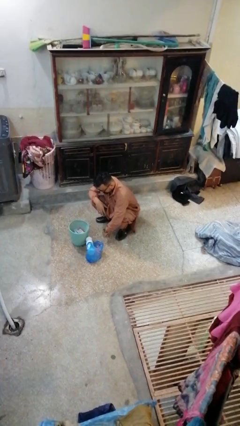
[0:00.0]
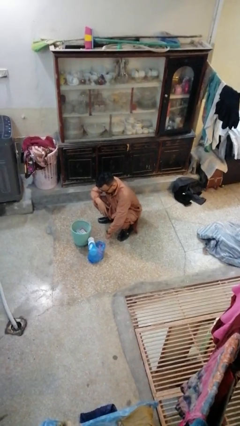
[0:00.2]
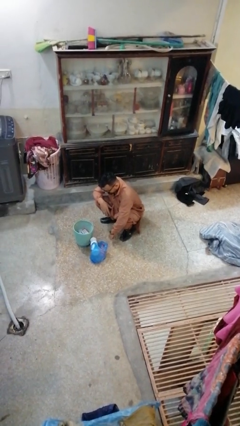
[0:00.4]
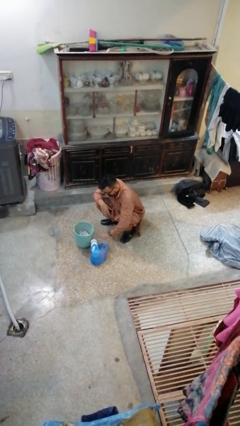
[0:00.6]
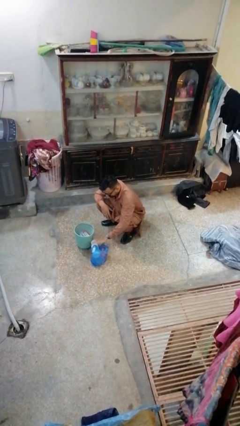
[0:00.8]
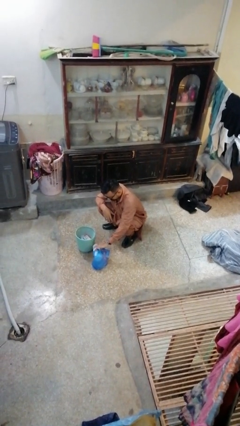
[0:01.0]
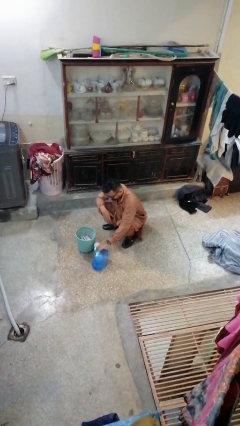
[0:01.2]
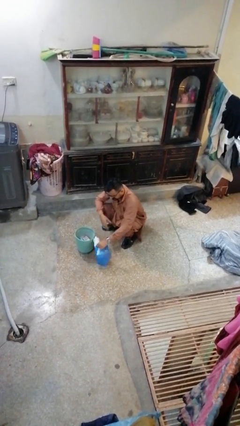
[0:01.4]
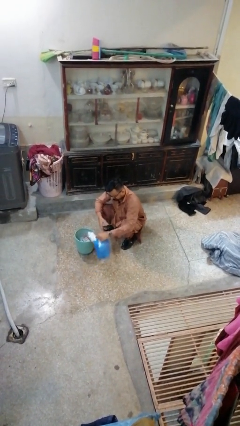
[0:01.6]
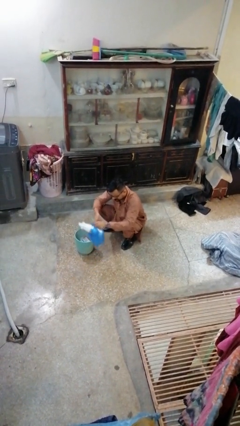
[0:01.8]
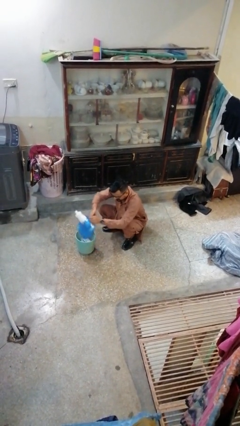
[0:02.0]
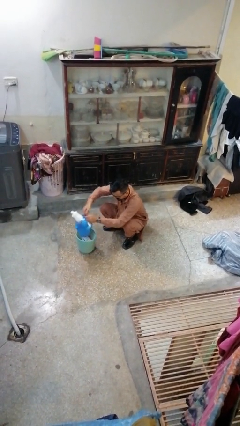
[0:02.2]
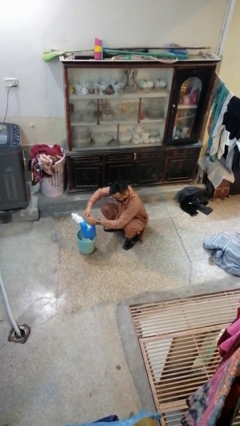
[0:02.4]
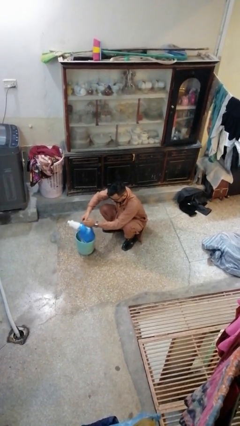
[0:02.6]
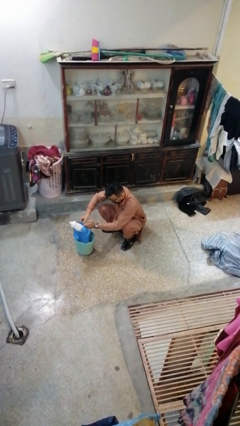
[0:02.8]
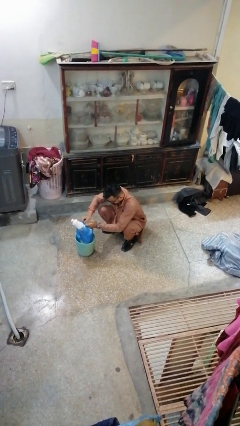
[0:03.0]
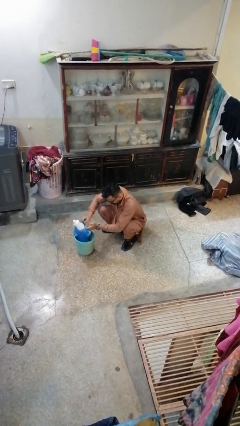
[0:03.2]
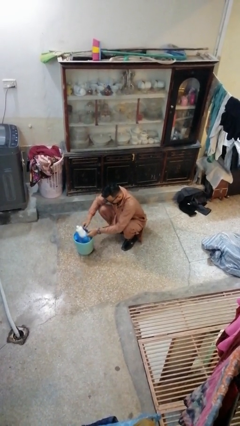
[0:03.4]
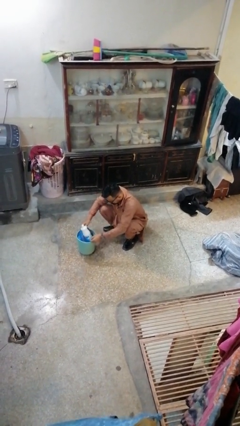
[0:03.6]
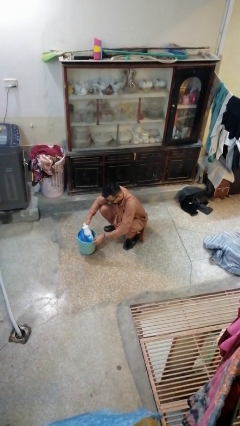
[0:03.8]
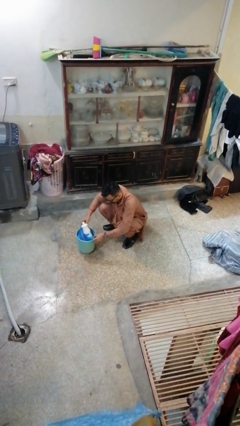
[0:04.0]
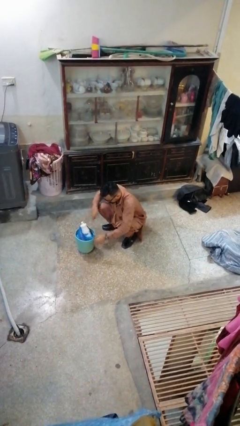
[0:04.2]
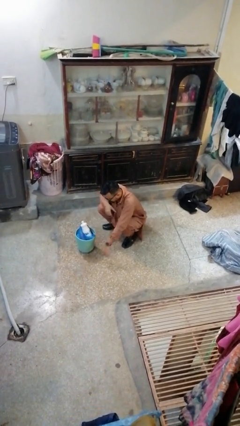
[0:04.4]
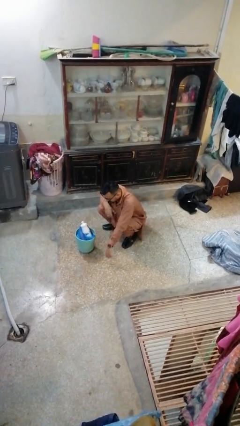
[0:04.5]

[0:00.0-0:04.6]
person inserts trashbag into trashcan

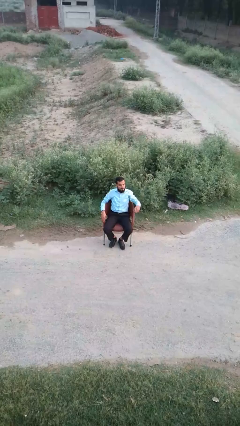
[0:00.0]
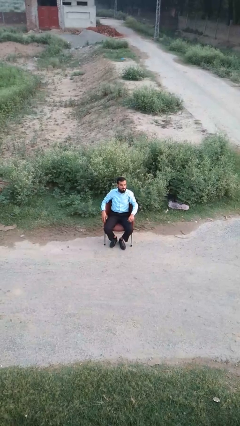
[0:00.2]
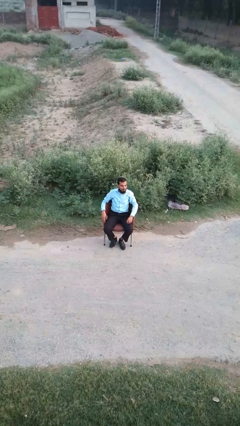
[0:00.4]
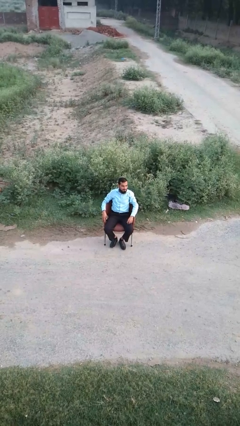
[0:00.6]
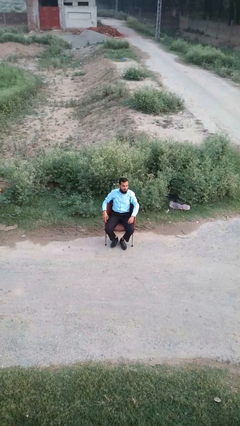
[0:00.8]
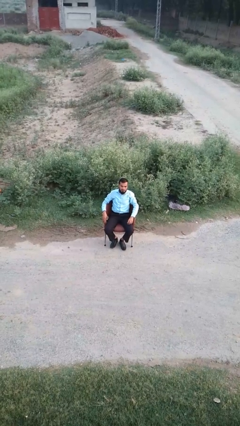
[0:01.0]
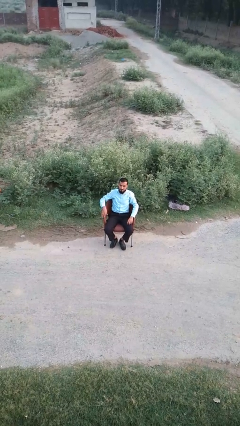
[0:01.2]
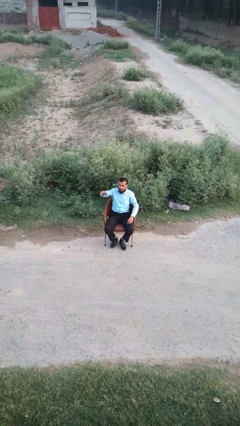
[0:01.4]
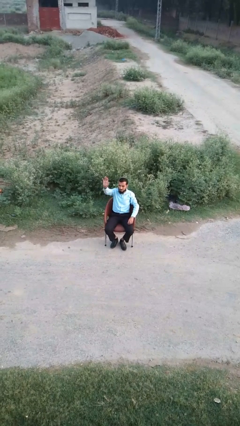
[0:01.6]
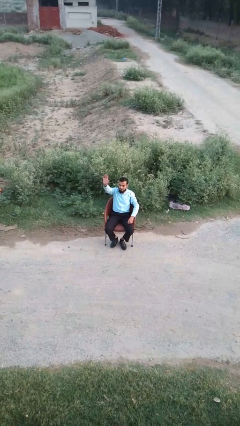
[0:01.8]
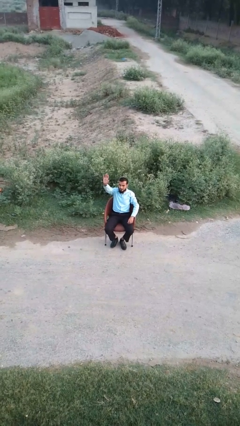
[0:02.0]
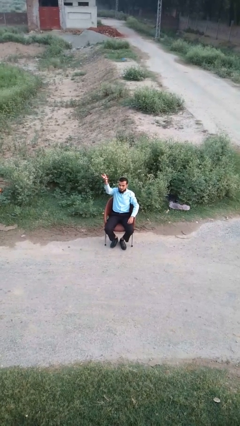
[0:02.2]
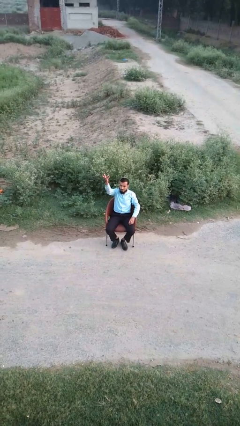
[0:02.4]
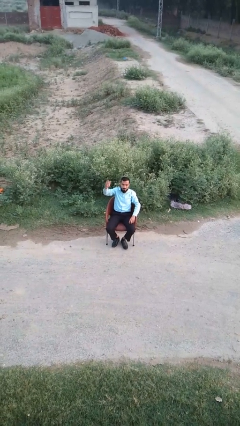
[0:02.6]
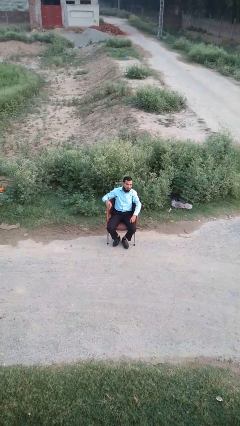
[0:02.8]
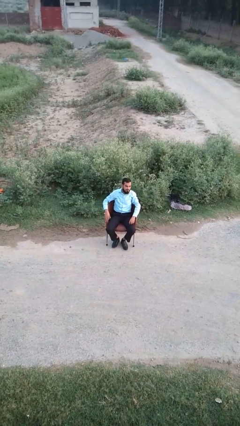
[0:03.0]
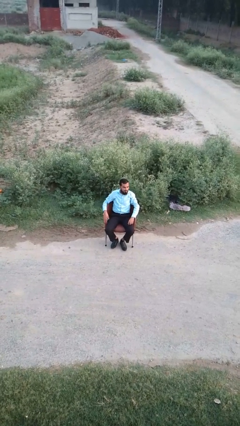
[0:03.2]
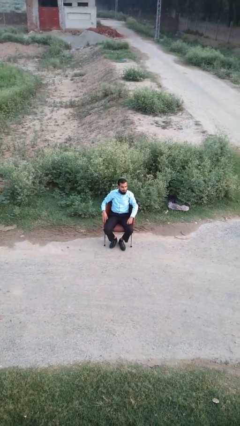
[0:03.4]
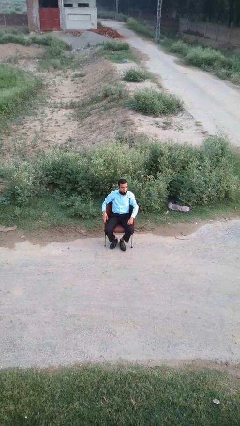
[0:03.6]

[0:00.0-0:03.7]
person gestures raise hand

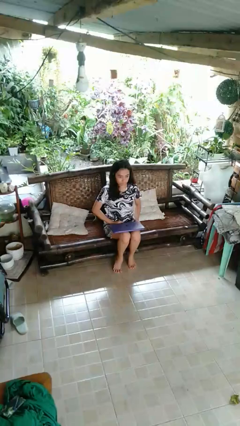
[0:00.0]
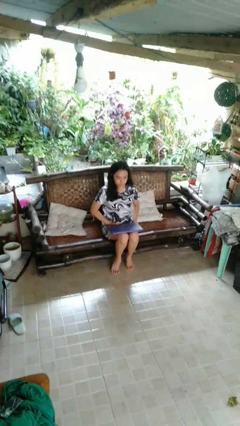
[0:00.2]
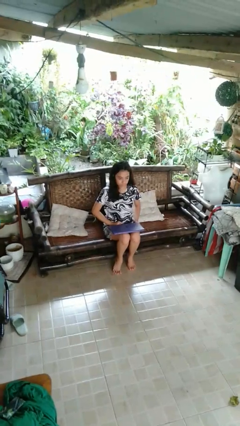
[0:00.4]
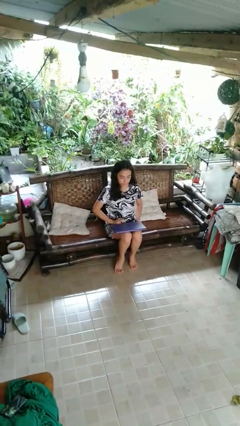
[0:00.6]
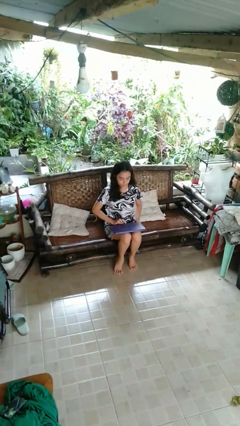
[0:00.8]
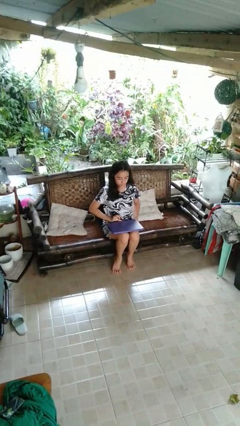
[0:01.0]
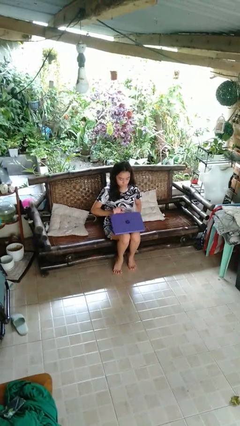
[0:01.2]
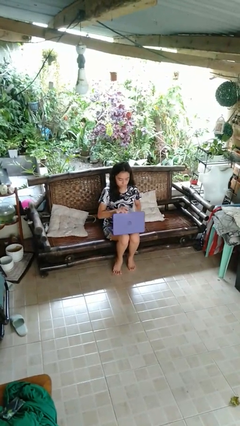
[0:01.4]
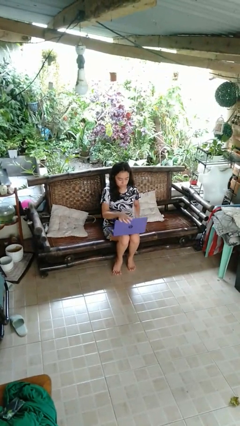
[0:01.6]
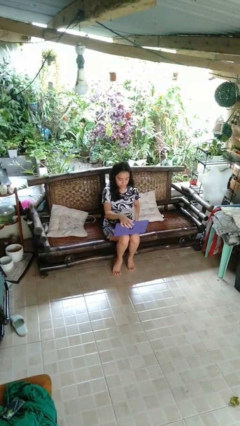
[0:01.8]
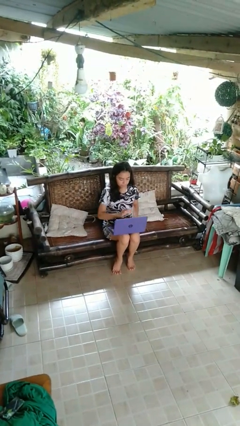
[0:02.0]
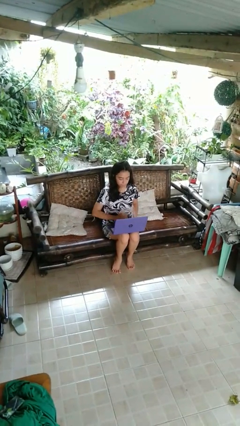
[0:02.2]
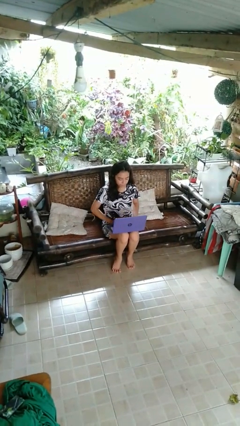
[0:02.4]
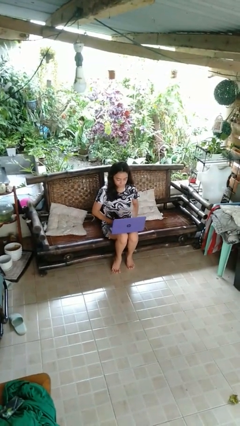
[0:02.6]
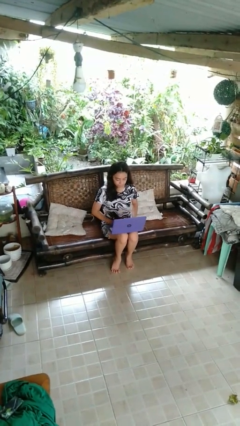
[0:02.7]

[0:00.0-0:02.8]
person opens laptop

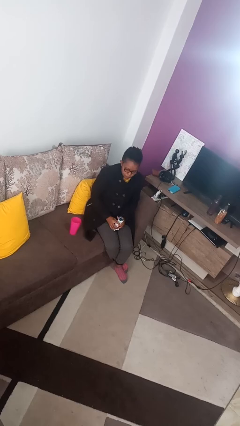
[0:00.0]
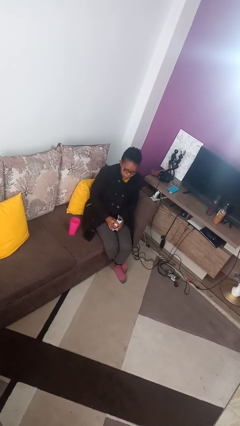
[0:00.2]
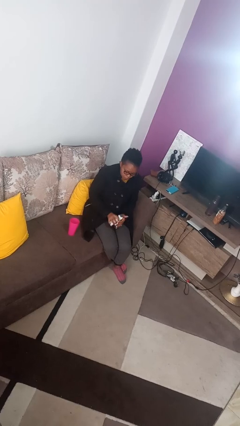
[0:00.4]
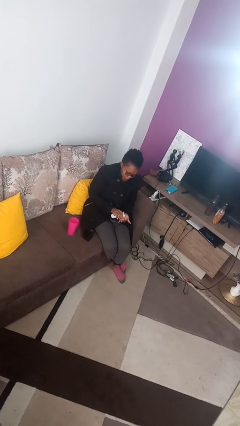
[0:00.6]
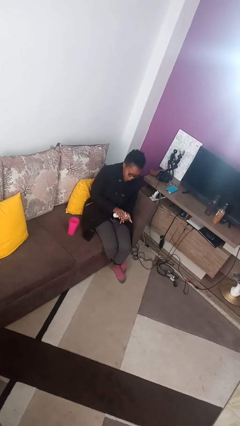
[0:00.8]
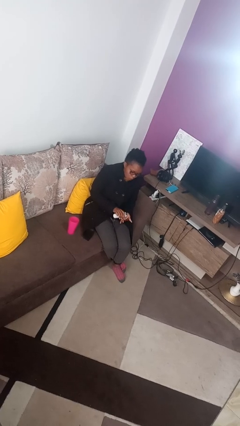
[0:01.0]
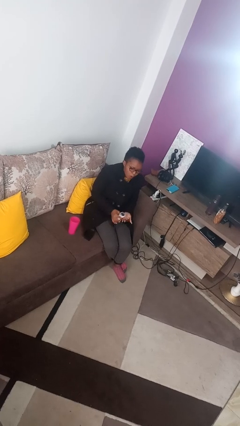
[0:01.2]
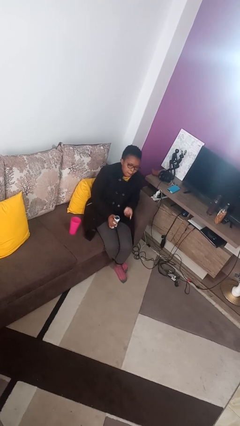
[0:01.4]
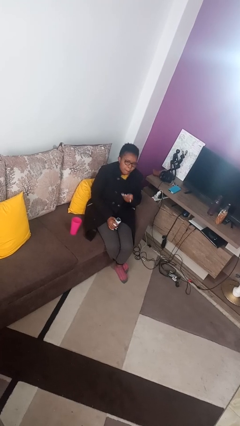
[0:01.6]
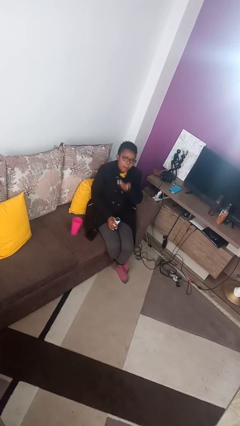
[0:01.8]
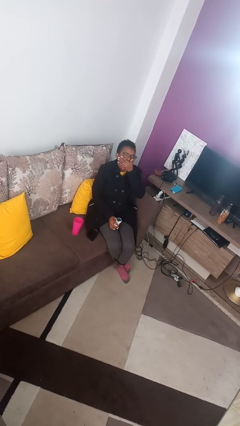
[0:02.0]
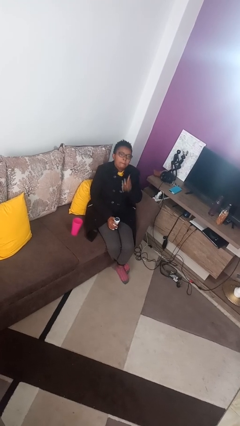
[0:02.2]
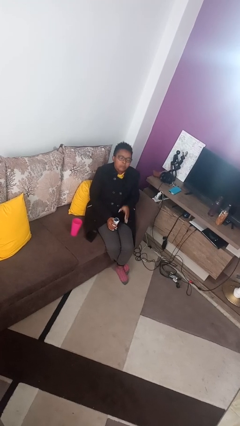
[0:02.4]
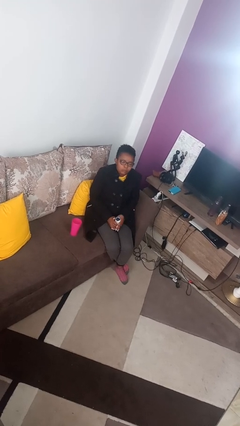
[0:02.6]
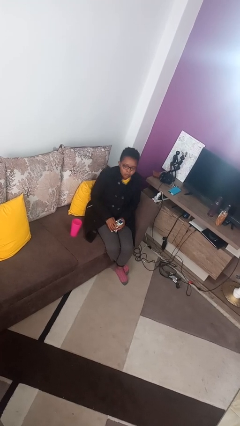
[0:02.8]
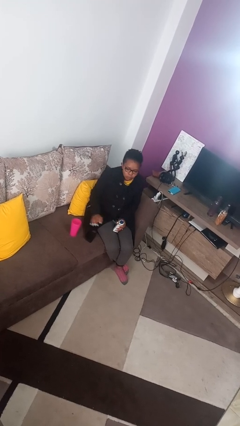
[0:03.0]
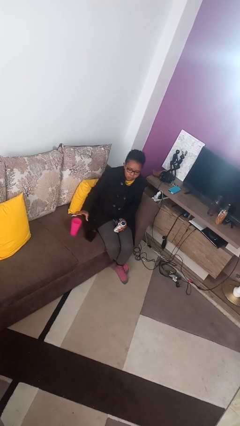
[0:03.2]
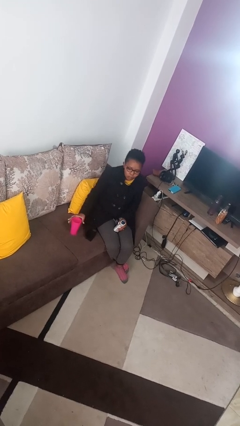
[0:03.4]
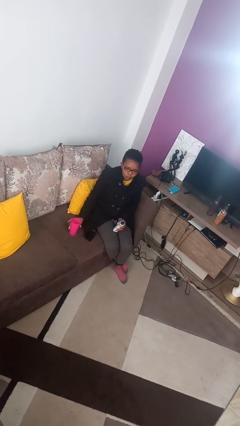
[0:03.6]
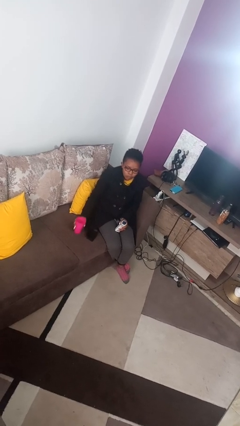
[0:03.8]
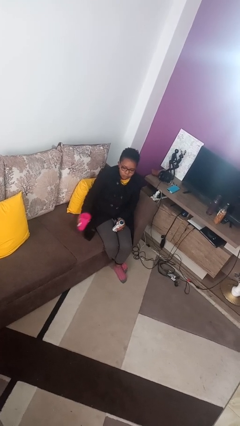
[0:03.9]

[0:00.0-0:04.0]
person takes medicine pills

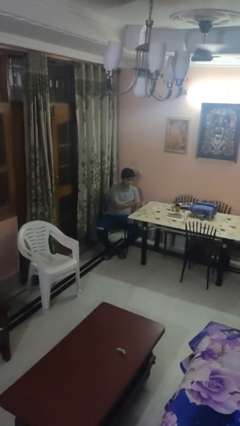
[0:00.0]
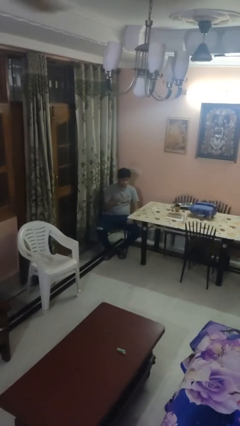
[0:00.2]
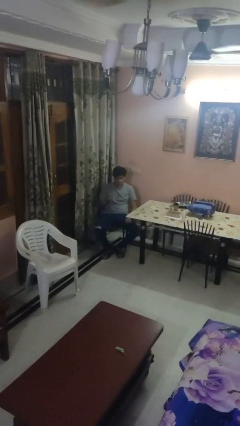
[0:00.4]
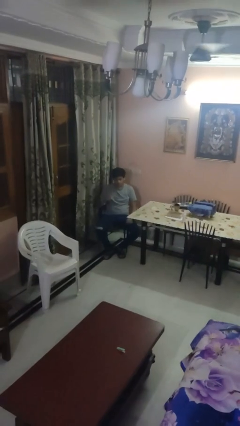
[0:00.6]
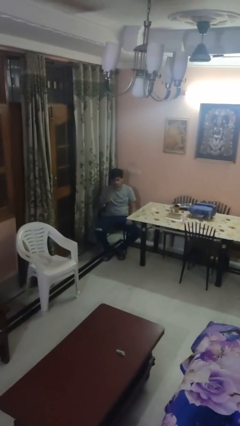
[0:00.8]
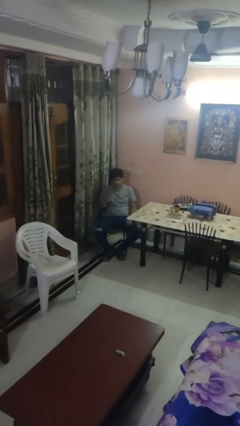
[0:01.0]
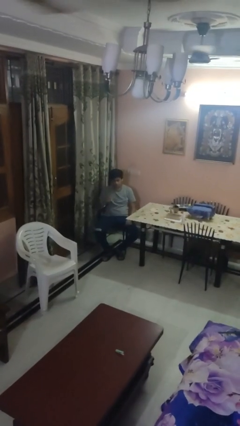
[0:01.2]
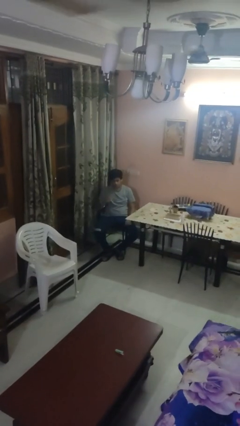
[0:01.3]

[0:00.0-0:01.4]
person picks up object from table

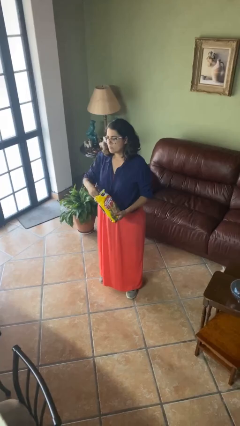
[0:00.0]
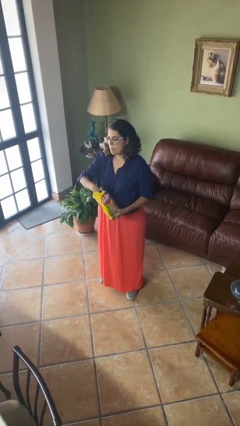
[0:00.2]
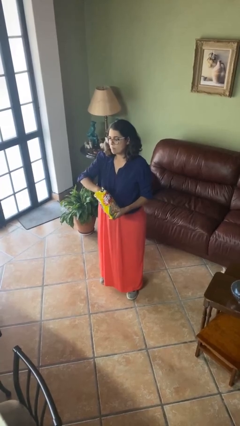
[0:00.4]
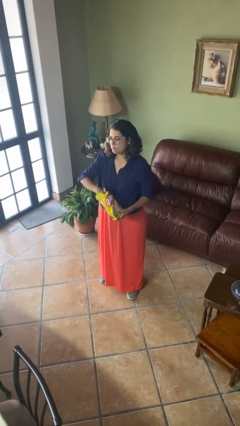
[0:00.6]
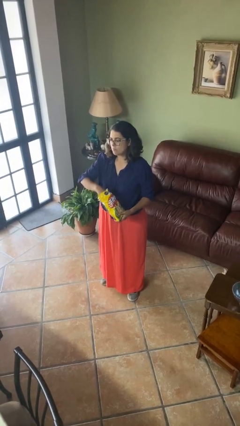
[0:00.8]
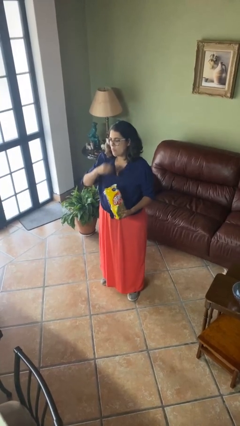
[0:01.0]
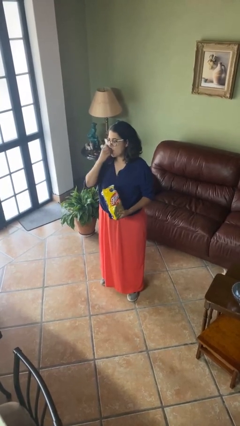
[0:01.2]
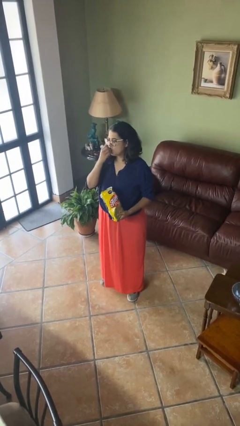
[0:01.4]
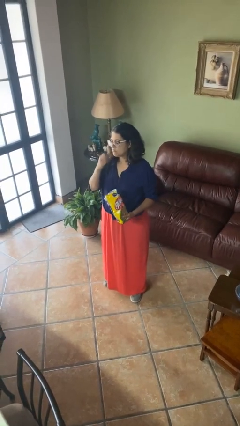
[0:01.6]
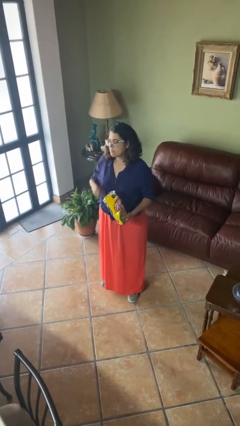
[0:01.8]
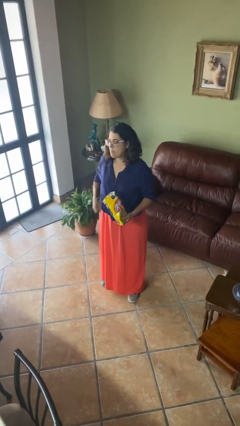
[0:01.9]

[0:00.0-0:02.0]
person eats snack from bag
